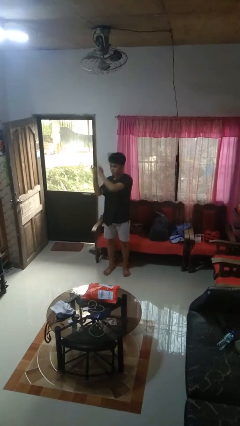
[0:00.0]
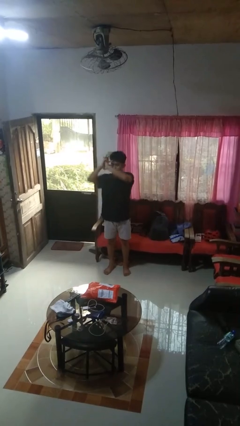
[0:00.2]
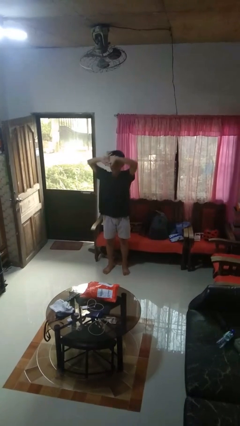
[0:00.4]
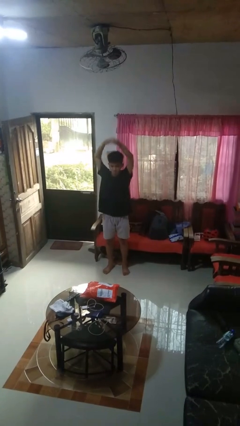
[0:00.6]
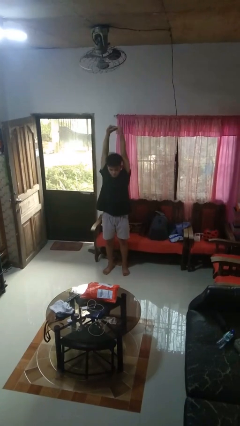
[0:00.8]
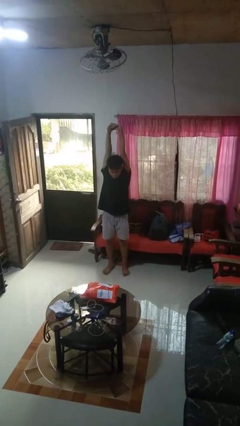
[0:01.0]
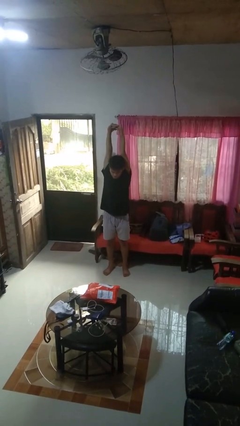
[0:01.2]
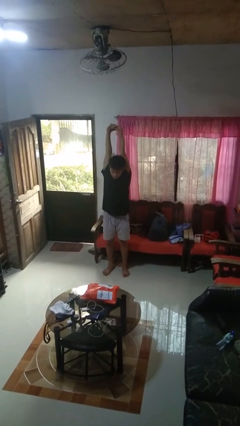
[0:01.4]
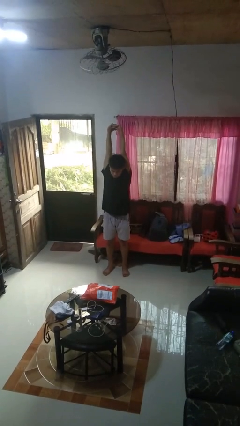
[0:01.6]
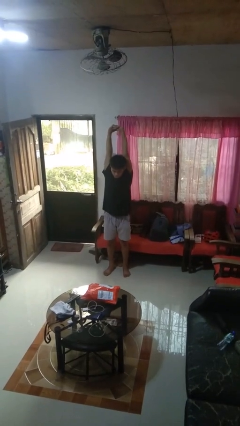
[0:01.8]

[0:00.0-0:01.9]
person stretches arms over head

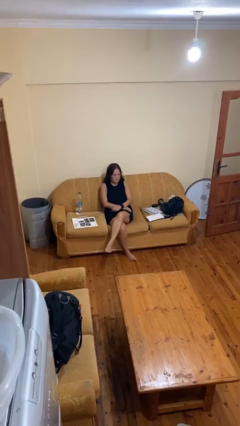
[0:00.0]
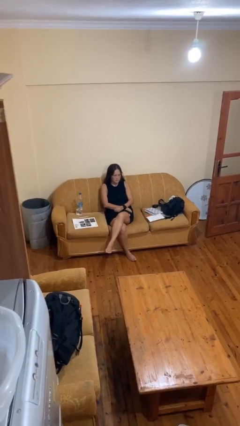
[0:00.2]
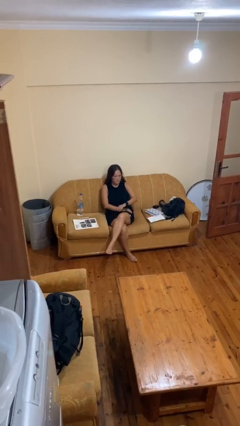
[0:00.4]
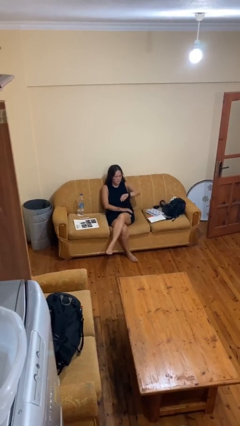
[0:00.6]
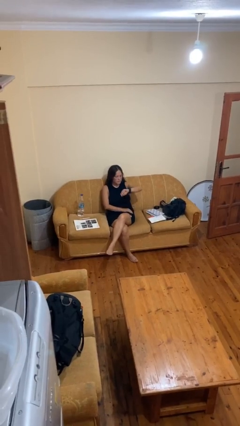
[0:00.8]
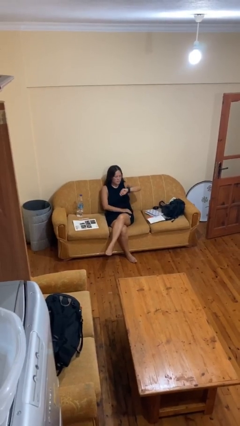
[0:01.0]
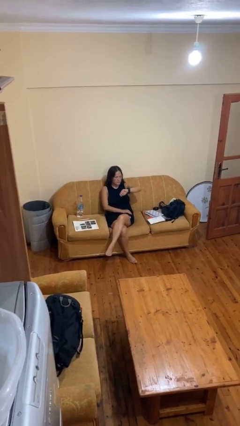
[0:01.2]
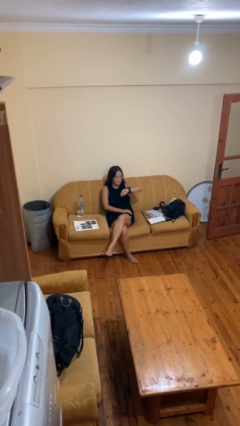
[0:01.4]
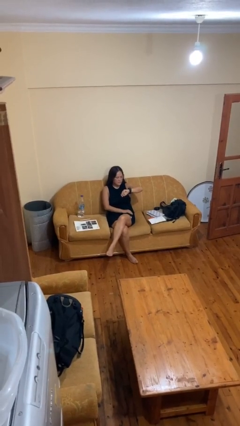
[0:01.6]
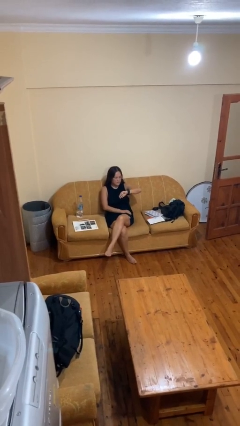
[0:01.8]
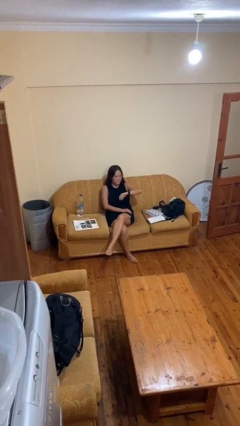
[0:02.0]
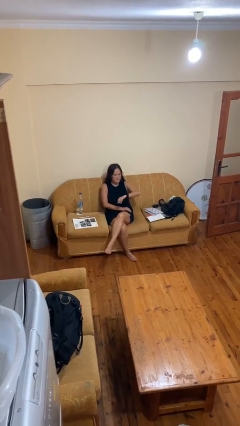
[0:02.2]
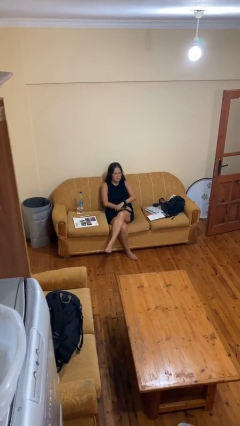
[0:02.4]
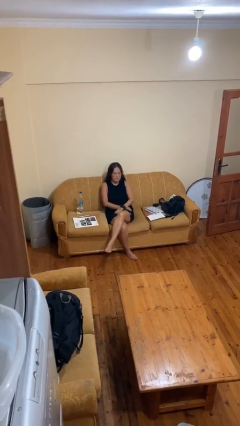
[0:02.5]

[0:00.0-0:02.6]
person looks at wristwatch

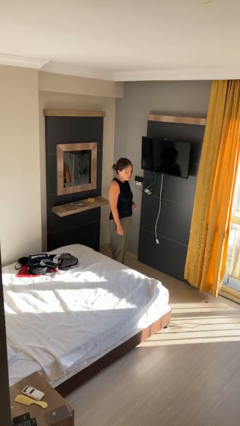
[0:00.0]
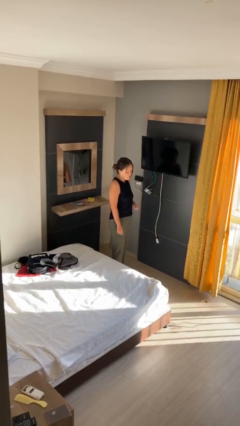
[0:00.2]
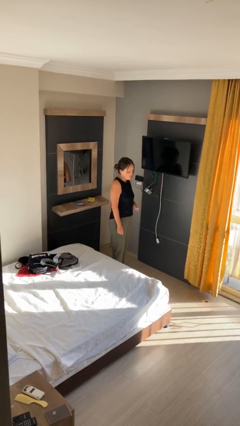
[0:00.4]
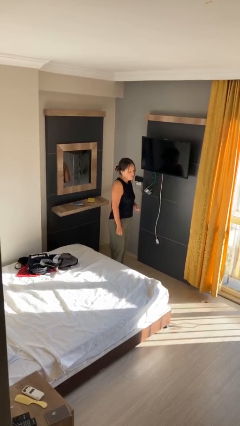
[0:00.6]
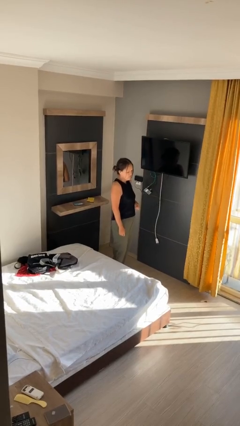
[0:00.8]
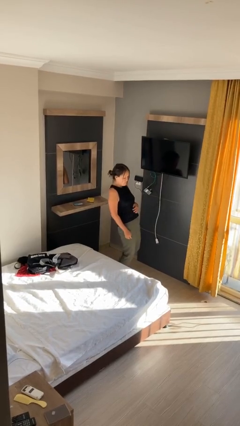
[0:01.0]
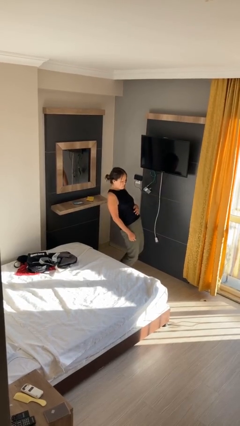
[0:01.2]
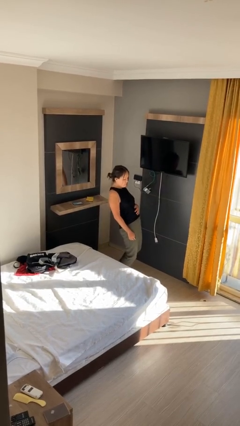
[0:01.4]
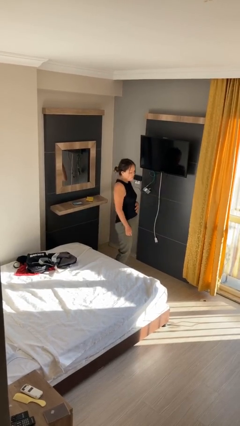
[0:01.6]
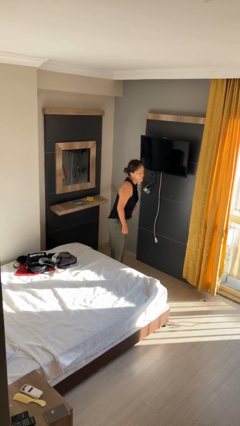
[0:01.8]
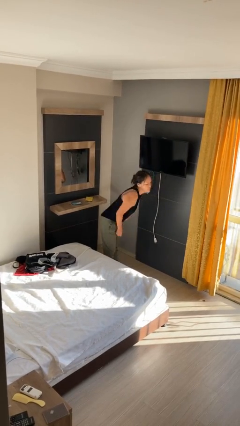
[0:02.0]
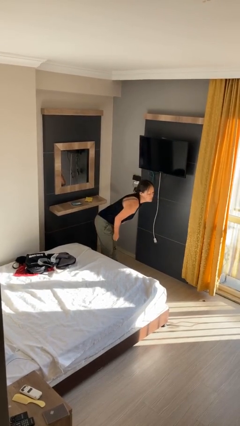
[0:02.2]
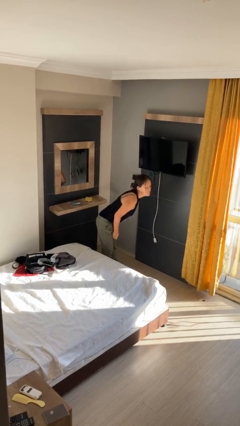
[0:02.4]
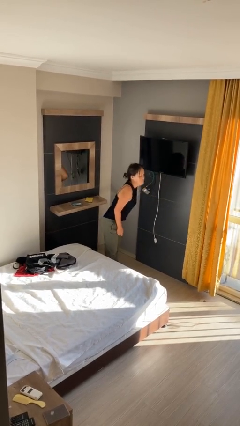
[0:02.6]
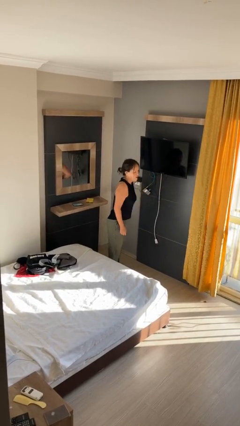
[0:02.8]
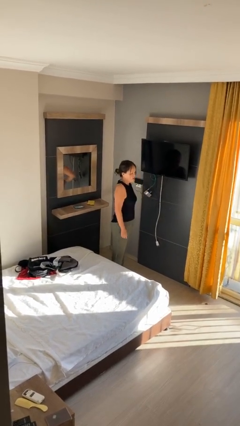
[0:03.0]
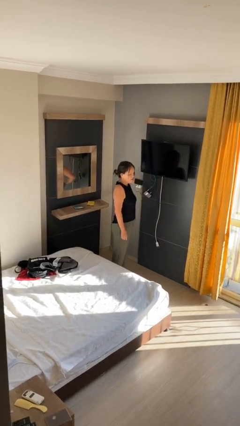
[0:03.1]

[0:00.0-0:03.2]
person wiggles hips

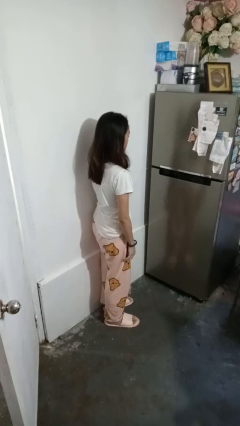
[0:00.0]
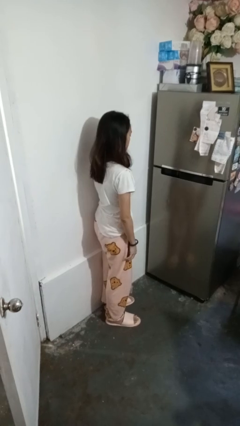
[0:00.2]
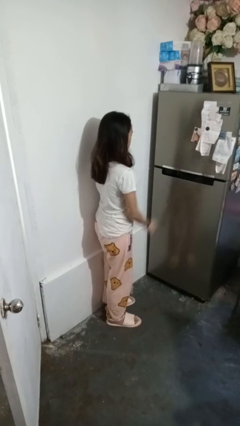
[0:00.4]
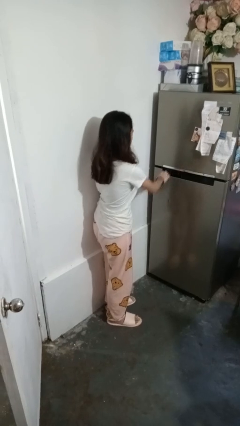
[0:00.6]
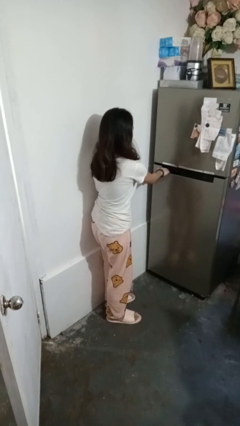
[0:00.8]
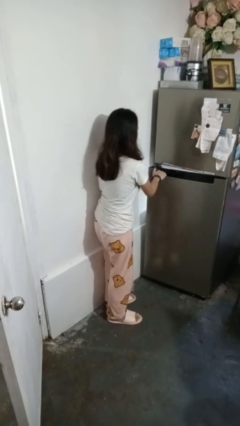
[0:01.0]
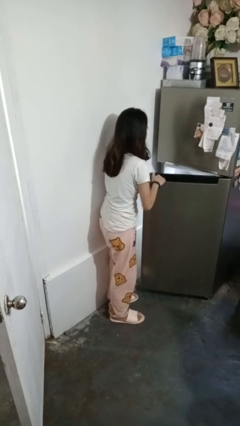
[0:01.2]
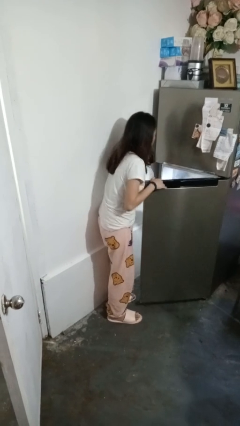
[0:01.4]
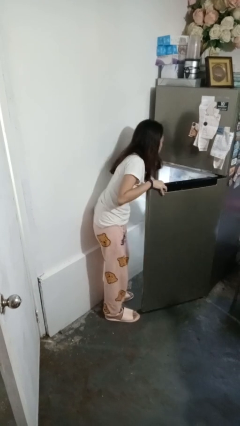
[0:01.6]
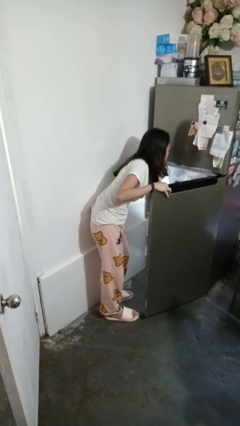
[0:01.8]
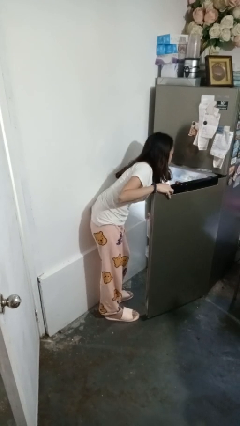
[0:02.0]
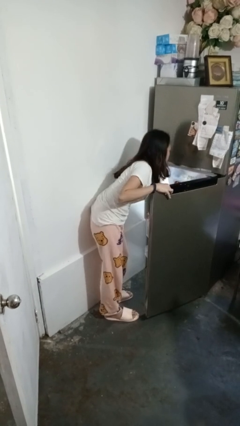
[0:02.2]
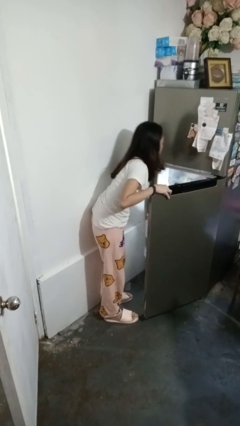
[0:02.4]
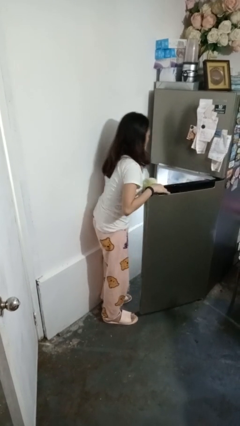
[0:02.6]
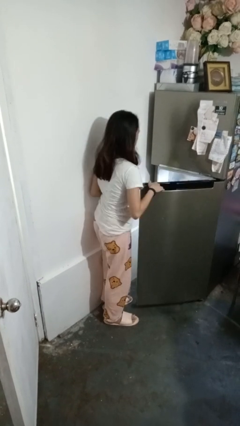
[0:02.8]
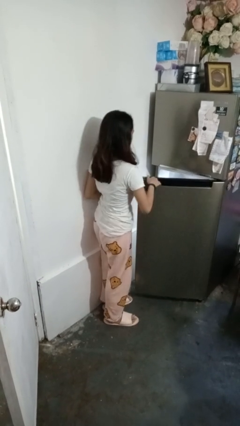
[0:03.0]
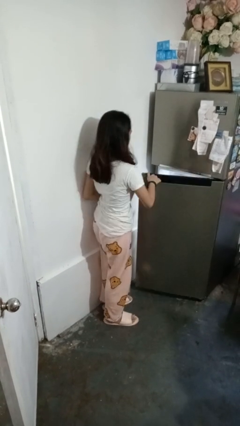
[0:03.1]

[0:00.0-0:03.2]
person takes object from refrigerator

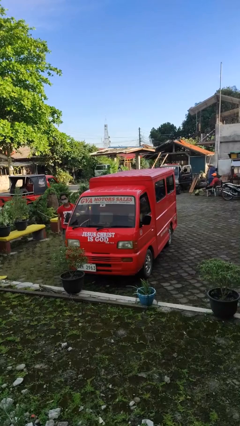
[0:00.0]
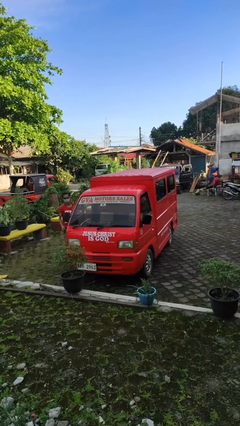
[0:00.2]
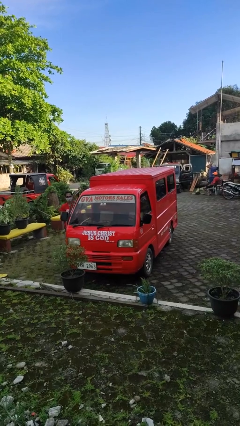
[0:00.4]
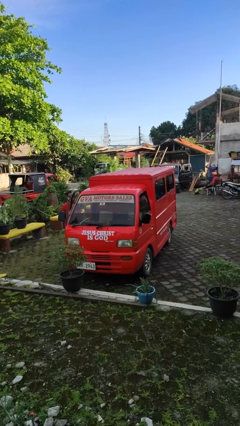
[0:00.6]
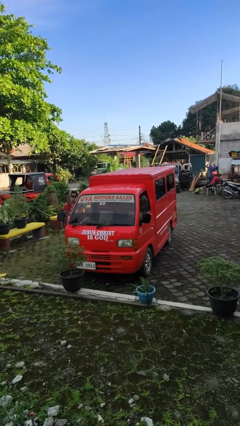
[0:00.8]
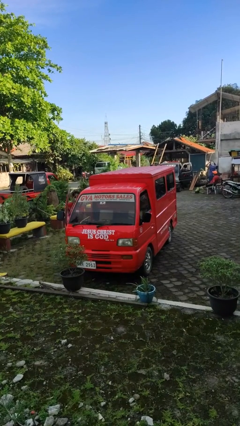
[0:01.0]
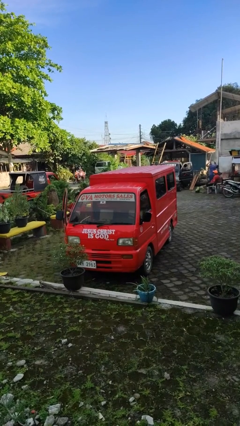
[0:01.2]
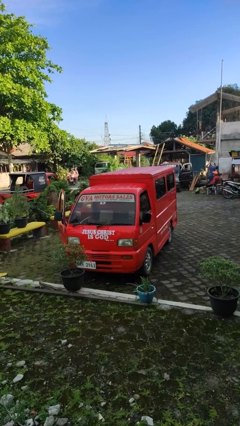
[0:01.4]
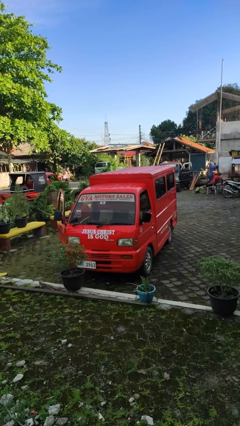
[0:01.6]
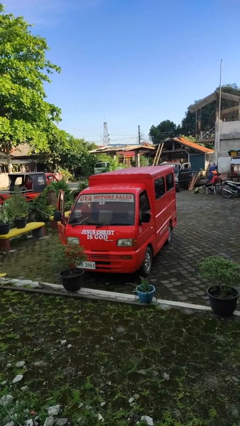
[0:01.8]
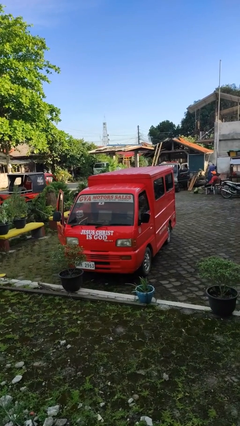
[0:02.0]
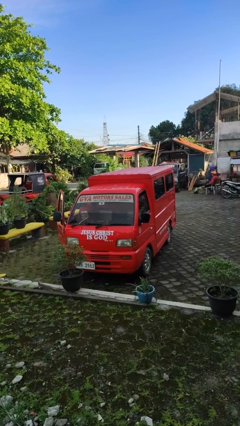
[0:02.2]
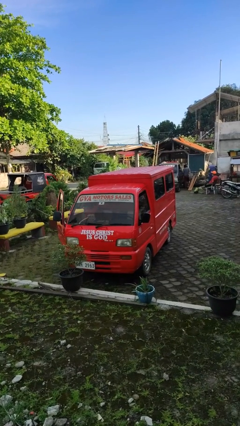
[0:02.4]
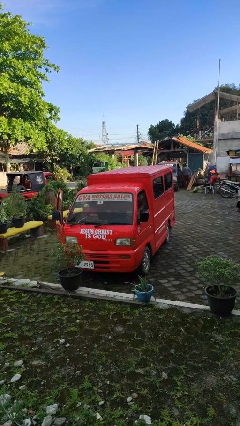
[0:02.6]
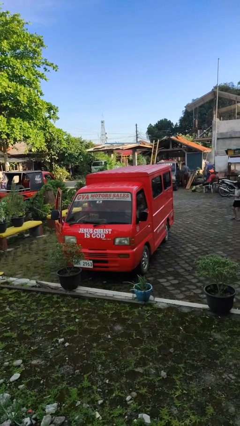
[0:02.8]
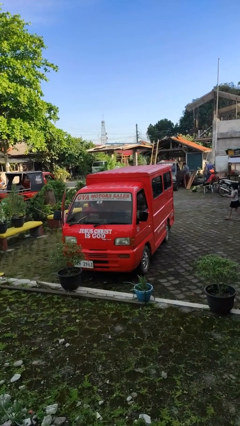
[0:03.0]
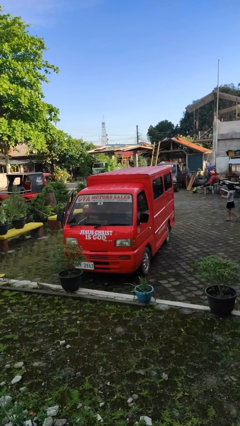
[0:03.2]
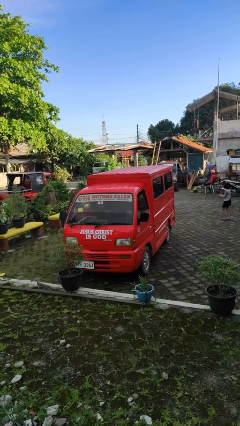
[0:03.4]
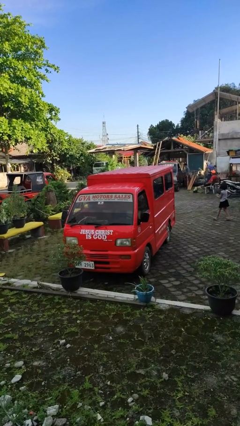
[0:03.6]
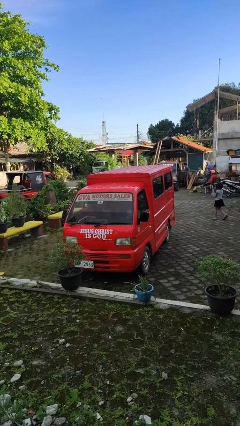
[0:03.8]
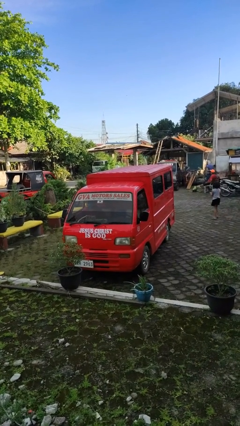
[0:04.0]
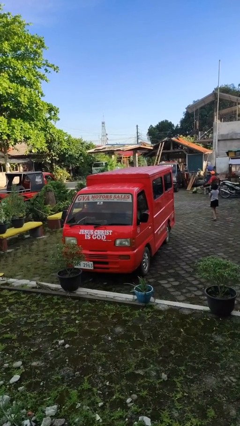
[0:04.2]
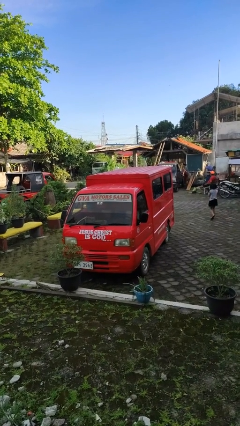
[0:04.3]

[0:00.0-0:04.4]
car picks up person

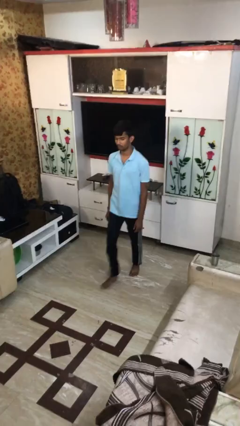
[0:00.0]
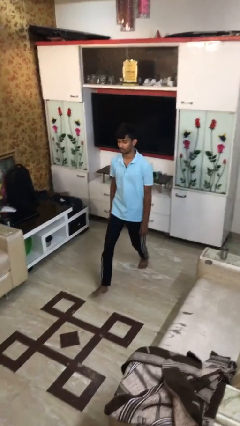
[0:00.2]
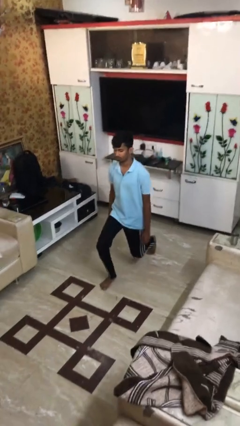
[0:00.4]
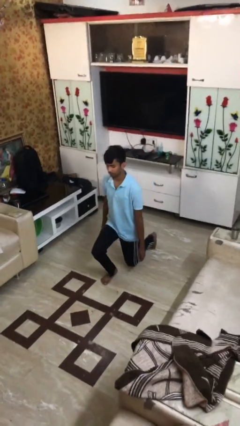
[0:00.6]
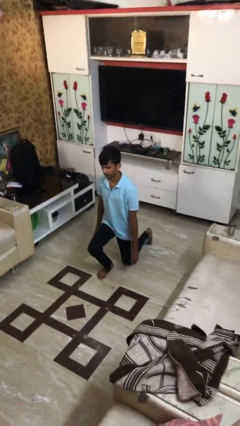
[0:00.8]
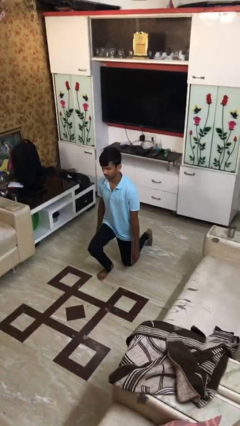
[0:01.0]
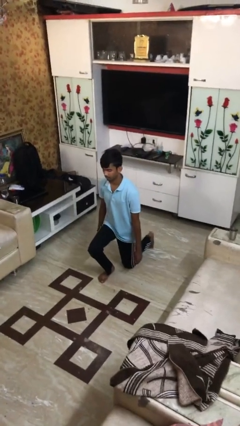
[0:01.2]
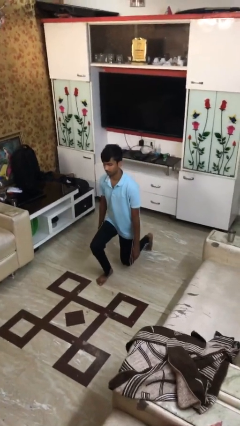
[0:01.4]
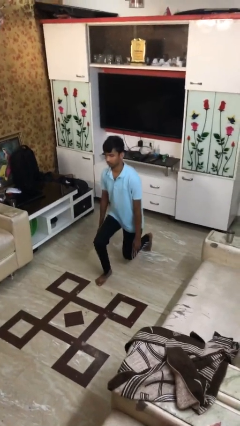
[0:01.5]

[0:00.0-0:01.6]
person exercises with lunges
